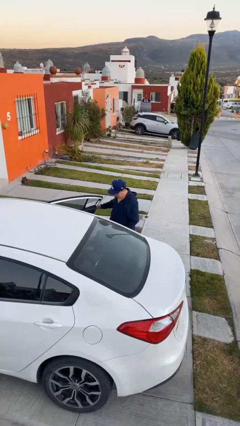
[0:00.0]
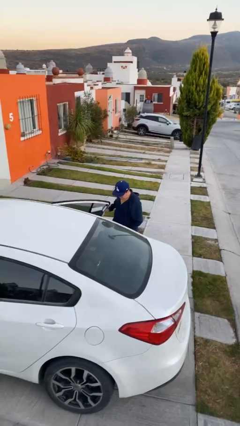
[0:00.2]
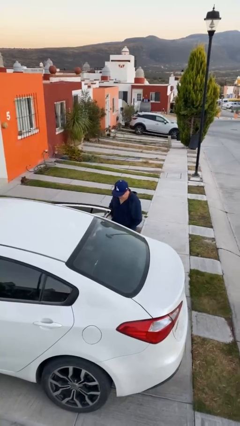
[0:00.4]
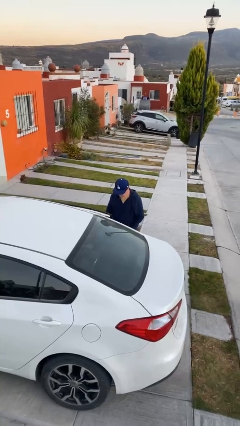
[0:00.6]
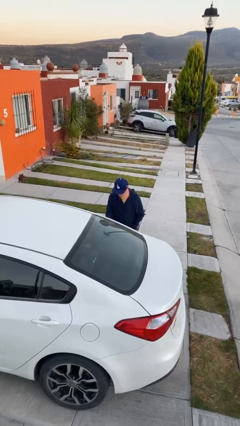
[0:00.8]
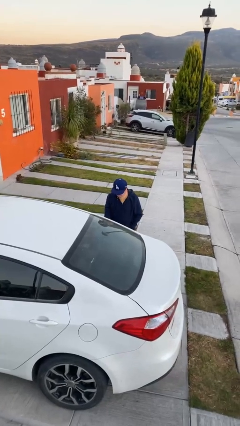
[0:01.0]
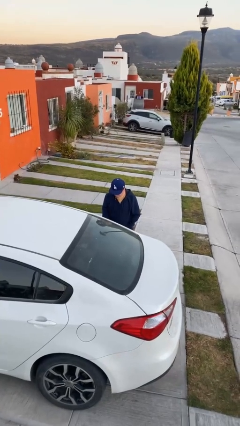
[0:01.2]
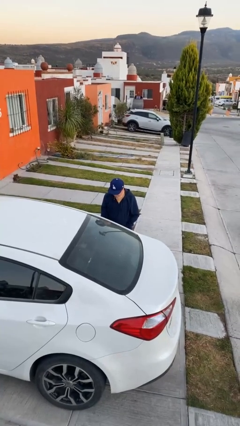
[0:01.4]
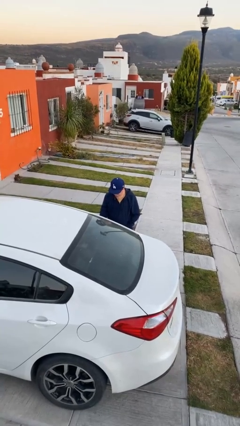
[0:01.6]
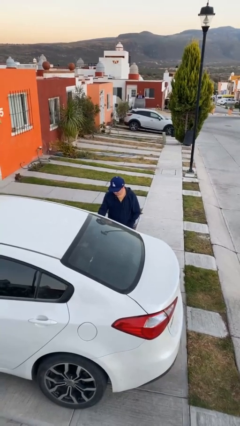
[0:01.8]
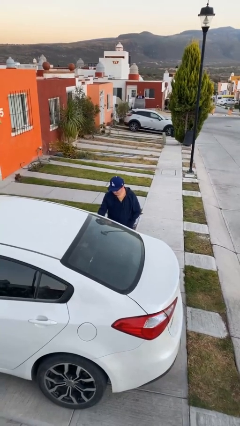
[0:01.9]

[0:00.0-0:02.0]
person closes car door

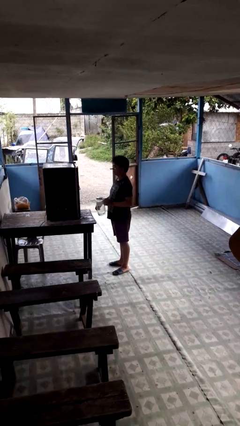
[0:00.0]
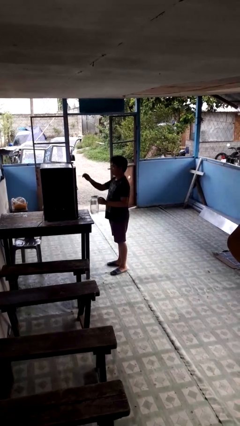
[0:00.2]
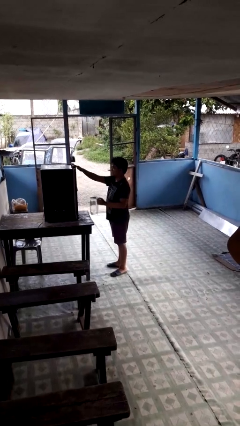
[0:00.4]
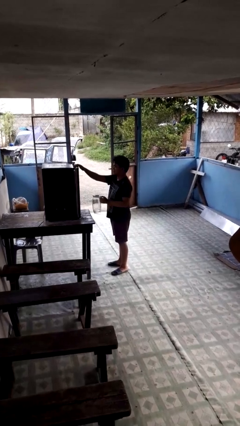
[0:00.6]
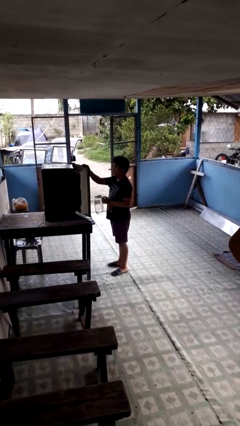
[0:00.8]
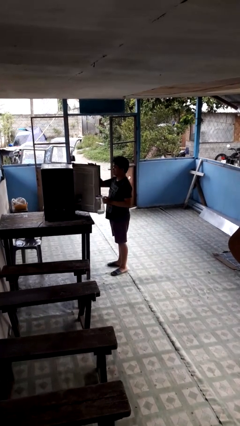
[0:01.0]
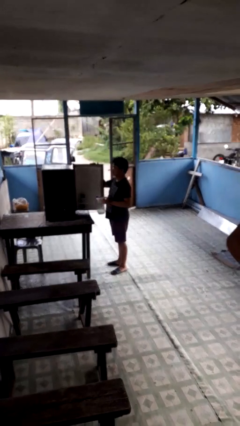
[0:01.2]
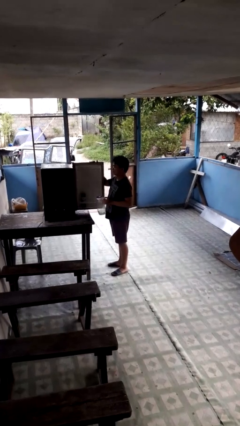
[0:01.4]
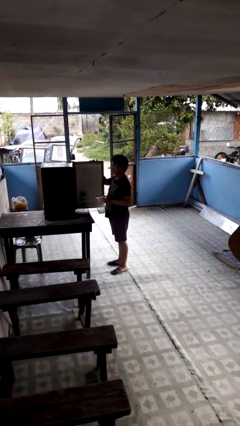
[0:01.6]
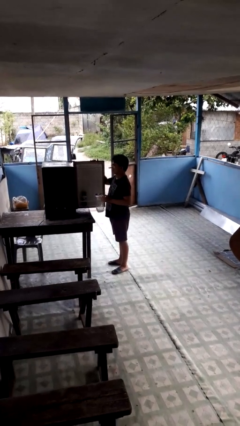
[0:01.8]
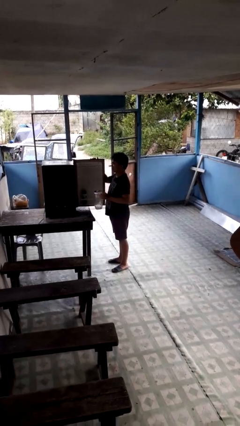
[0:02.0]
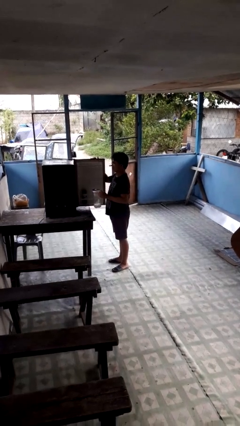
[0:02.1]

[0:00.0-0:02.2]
person opens refrigerator

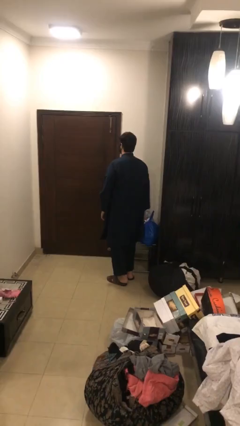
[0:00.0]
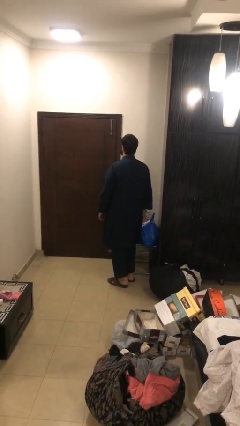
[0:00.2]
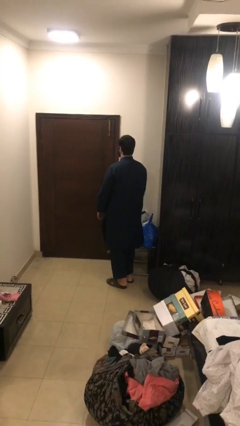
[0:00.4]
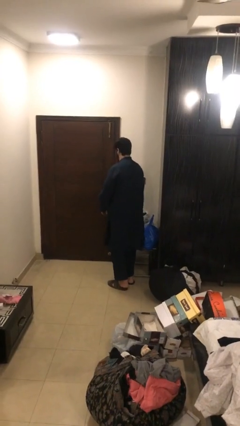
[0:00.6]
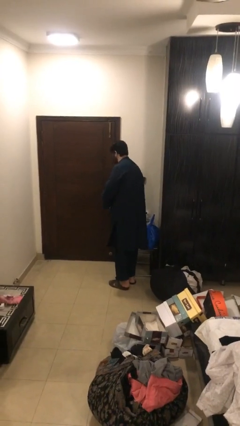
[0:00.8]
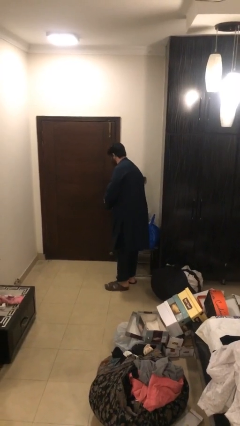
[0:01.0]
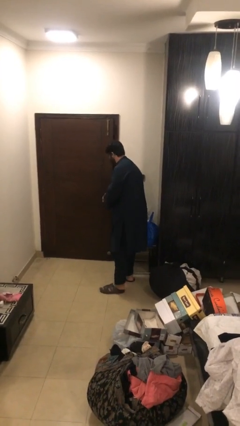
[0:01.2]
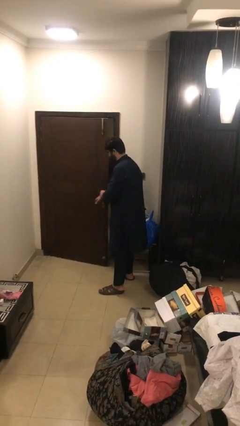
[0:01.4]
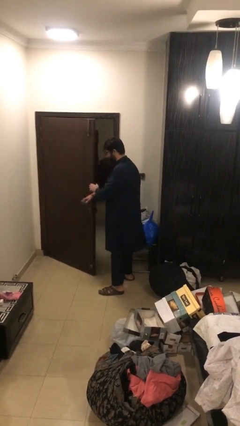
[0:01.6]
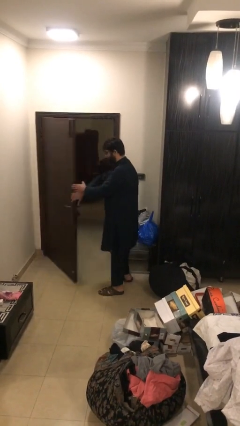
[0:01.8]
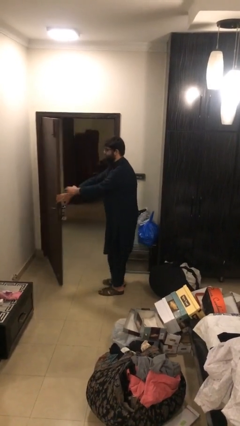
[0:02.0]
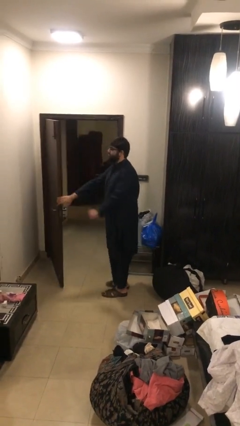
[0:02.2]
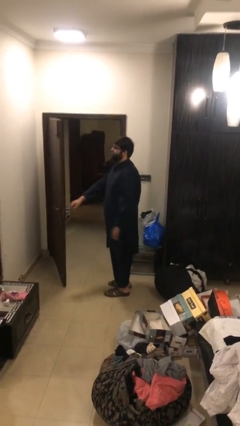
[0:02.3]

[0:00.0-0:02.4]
person opens facility door

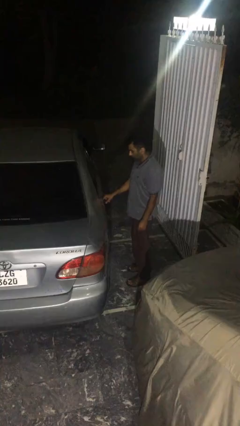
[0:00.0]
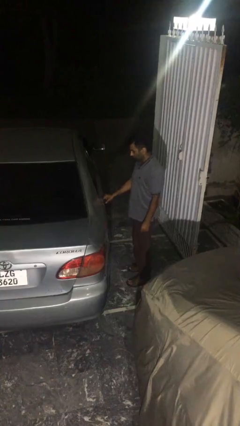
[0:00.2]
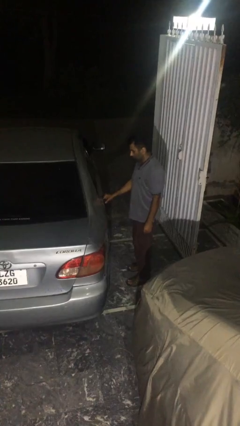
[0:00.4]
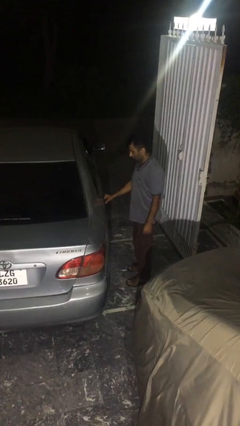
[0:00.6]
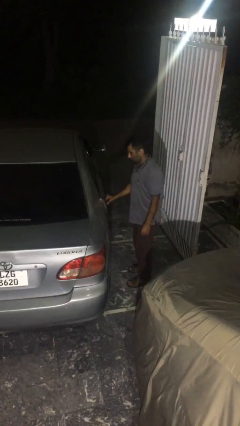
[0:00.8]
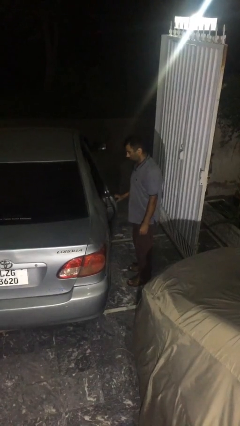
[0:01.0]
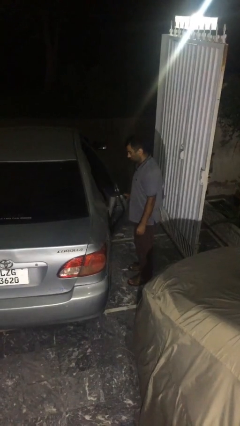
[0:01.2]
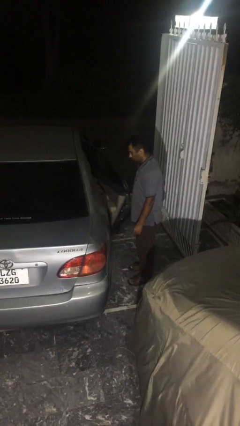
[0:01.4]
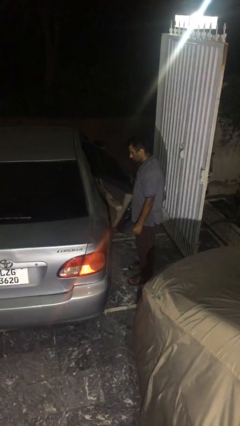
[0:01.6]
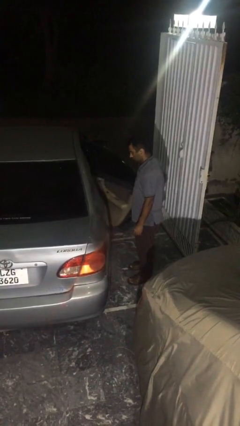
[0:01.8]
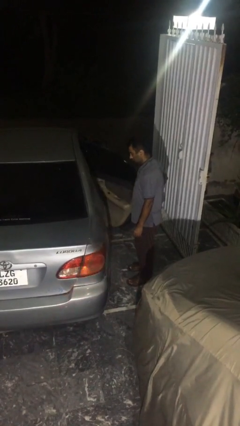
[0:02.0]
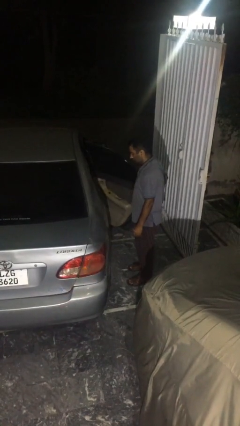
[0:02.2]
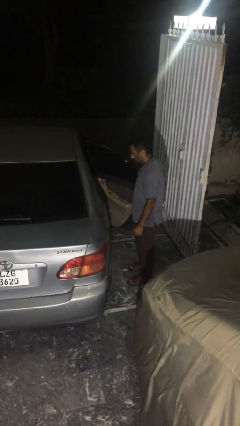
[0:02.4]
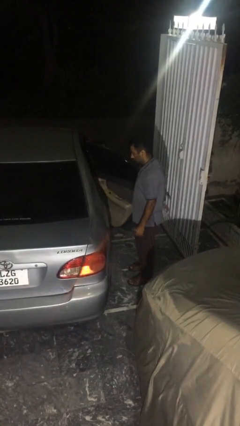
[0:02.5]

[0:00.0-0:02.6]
person opens car door

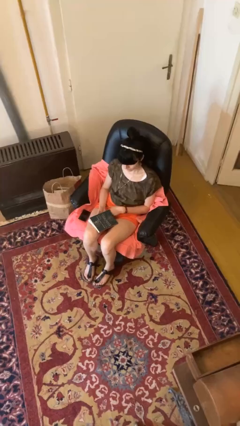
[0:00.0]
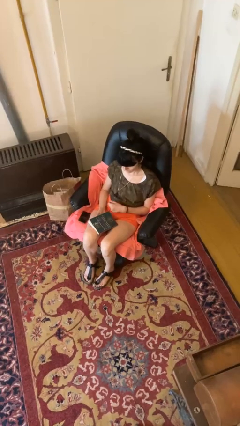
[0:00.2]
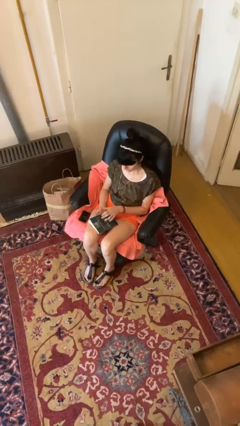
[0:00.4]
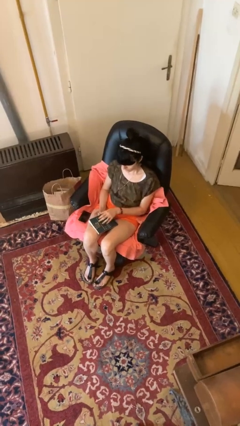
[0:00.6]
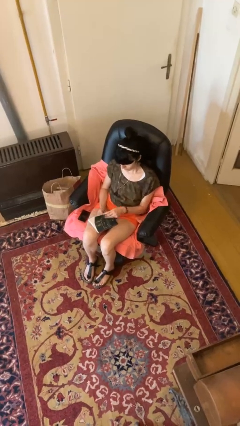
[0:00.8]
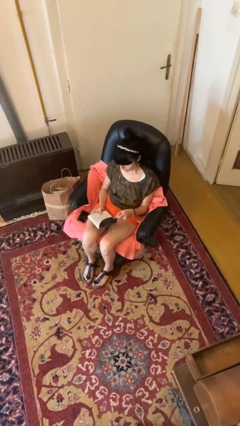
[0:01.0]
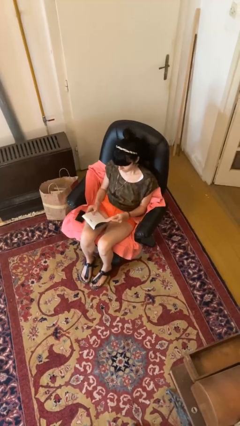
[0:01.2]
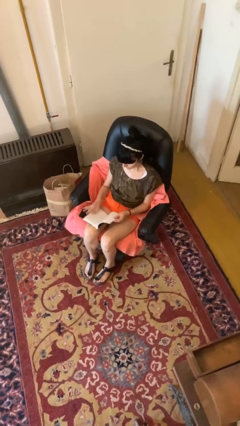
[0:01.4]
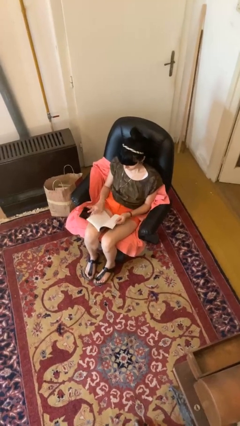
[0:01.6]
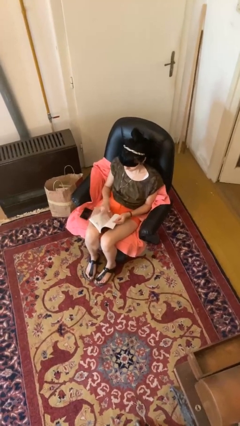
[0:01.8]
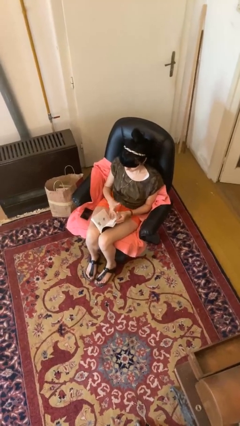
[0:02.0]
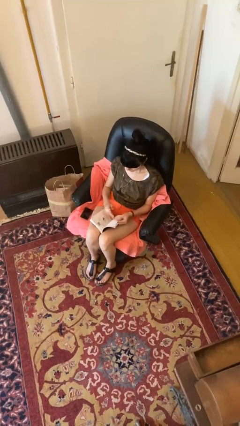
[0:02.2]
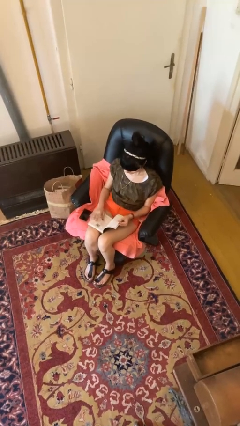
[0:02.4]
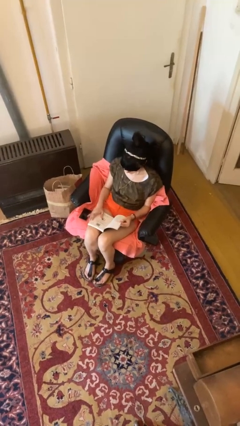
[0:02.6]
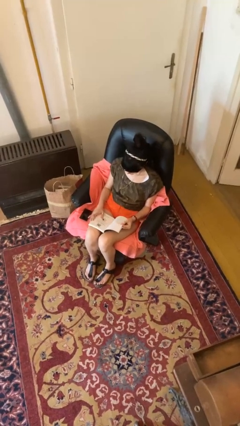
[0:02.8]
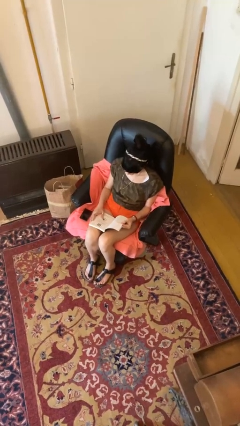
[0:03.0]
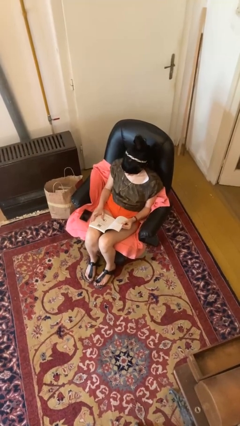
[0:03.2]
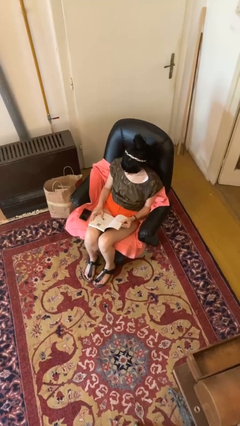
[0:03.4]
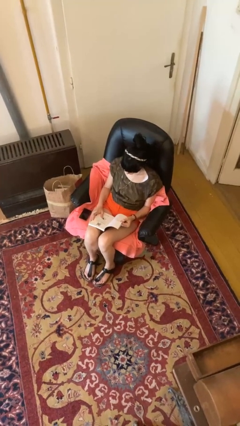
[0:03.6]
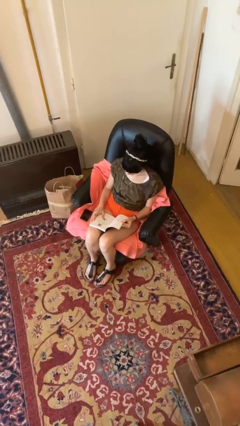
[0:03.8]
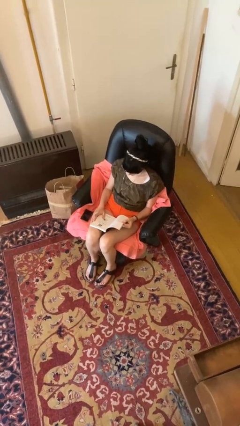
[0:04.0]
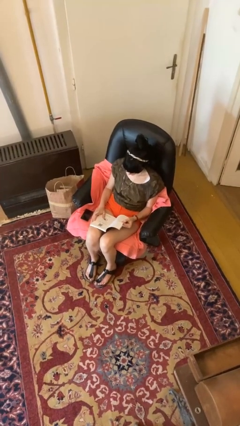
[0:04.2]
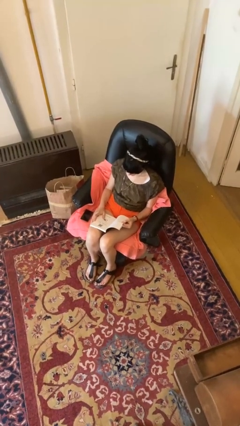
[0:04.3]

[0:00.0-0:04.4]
person reads book

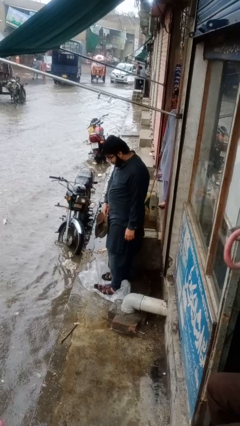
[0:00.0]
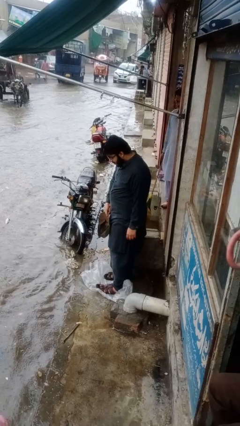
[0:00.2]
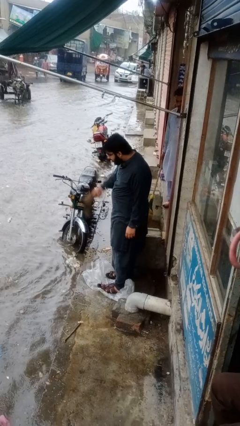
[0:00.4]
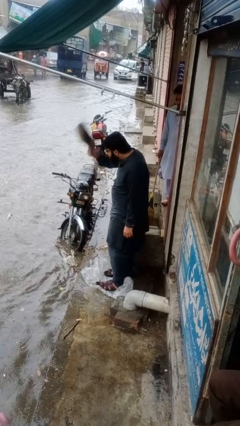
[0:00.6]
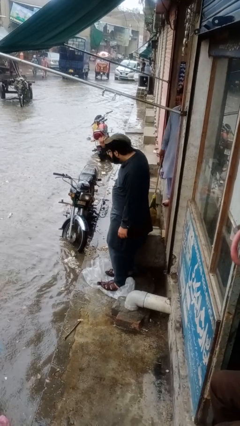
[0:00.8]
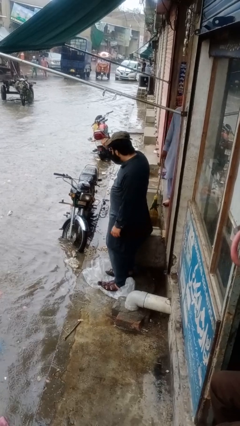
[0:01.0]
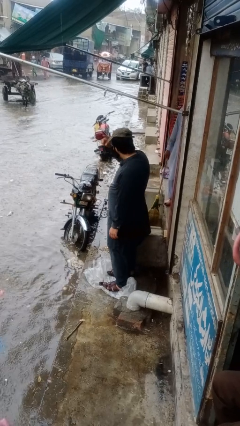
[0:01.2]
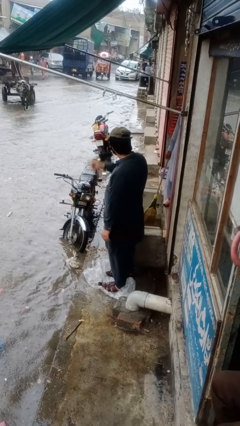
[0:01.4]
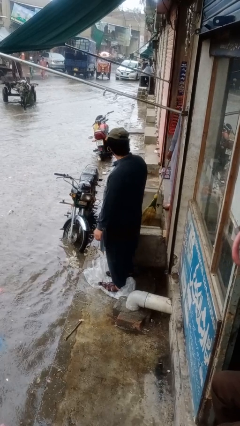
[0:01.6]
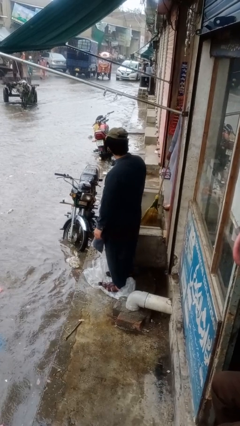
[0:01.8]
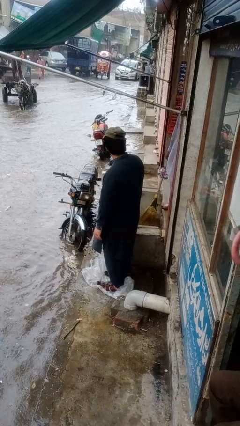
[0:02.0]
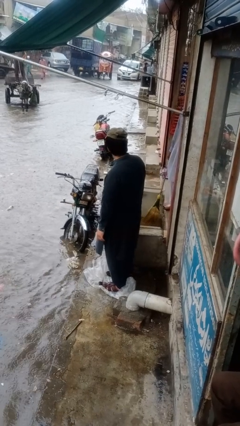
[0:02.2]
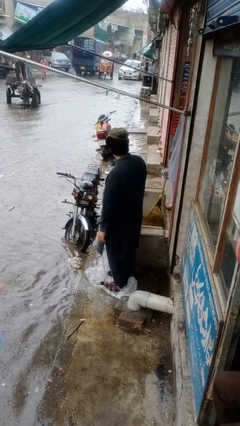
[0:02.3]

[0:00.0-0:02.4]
person puts on hat

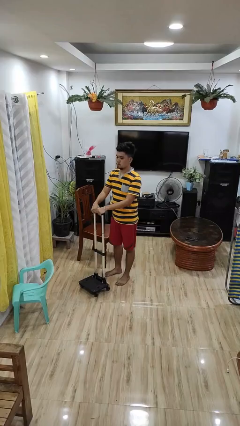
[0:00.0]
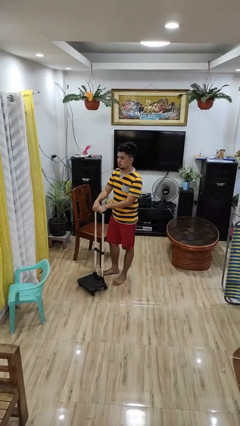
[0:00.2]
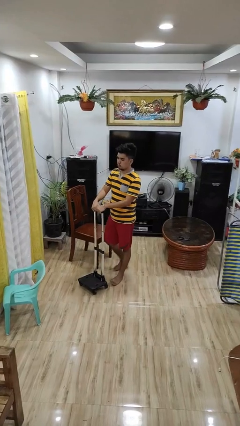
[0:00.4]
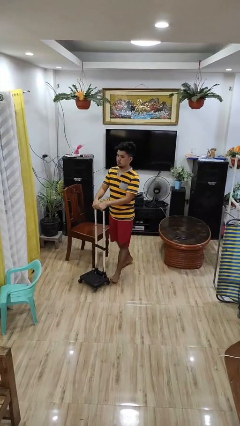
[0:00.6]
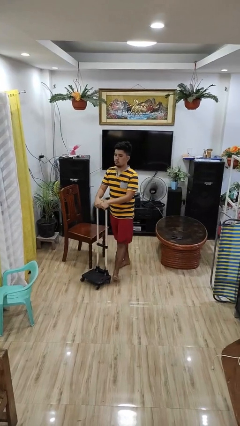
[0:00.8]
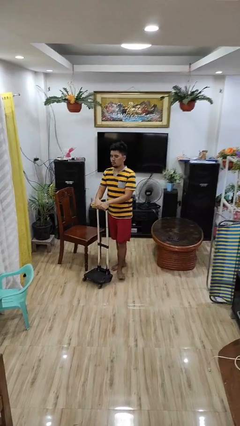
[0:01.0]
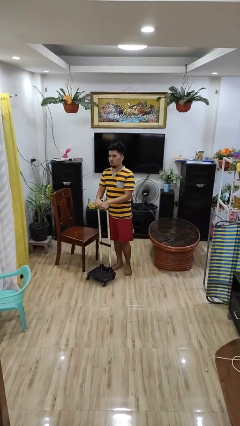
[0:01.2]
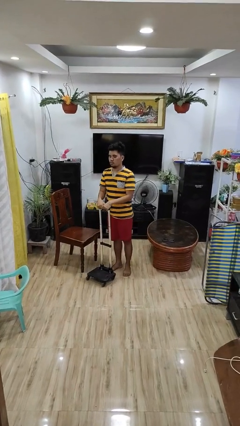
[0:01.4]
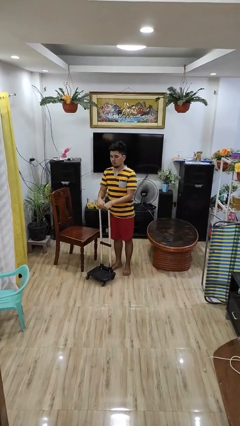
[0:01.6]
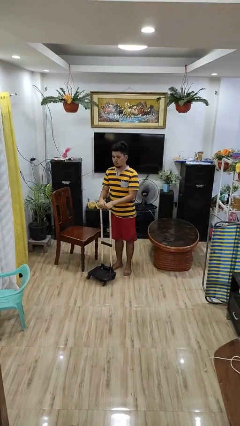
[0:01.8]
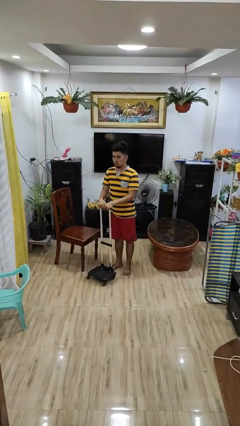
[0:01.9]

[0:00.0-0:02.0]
person pulls wheeled cart
